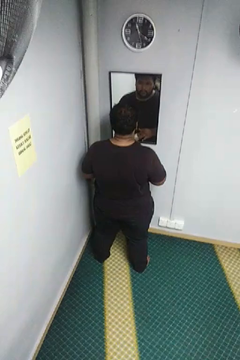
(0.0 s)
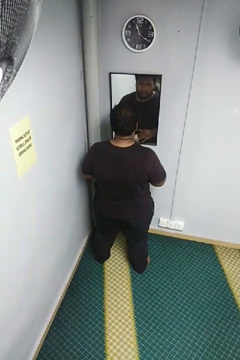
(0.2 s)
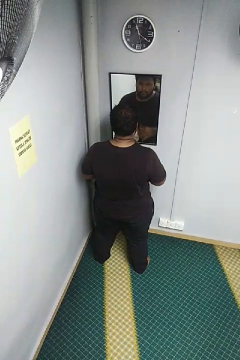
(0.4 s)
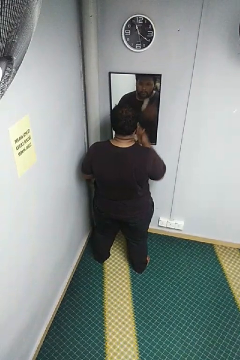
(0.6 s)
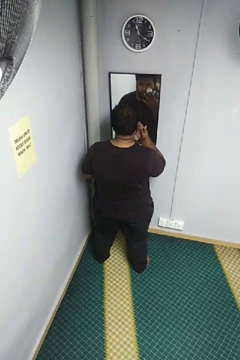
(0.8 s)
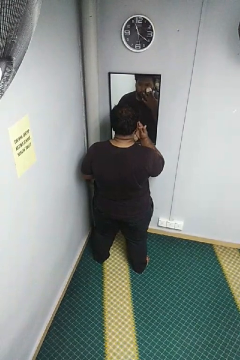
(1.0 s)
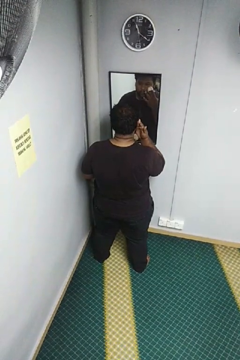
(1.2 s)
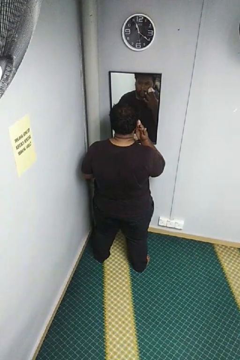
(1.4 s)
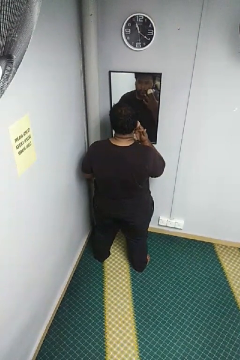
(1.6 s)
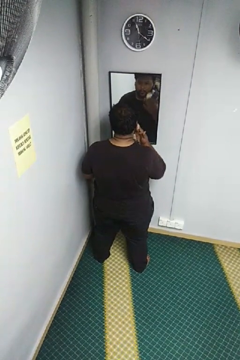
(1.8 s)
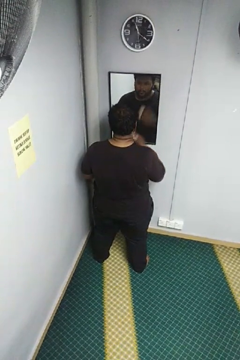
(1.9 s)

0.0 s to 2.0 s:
person applies foundation makeup

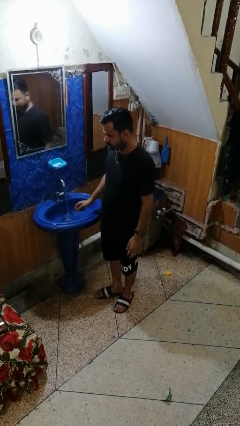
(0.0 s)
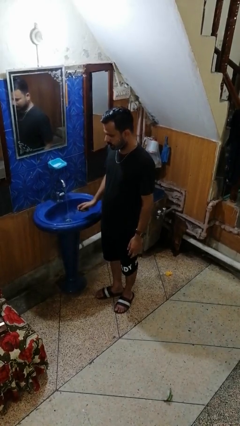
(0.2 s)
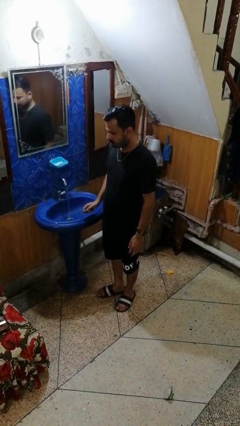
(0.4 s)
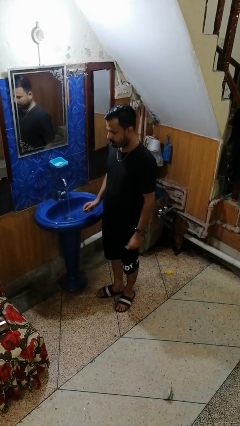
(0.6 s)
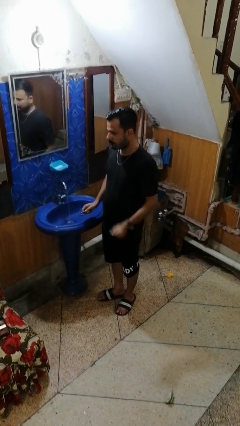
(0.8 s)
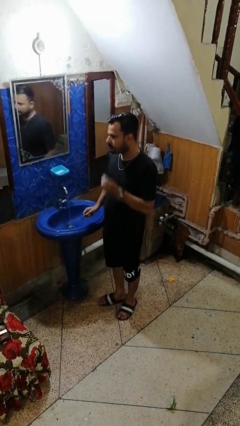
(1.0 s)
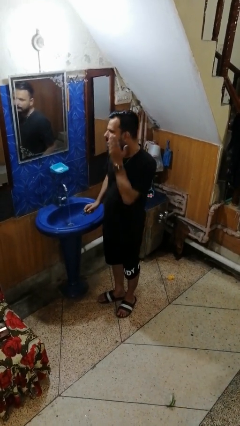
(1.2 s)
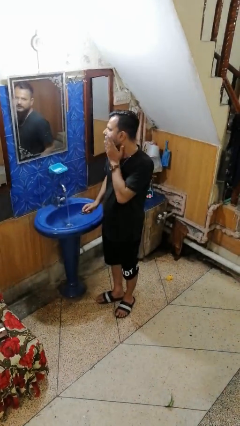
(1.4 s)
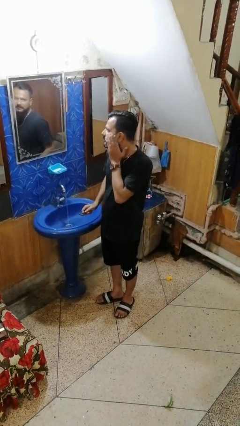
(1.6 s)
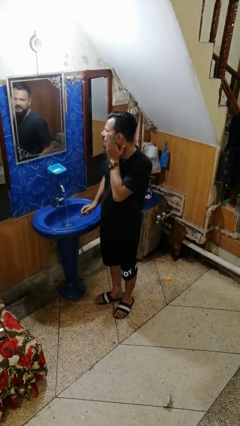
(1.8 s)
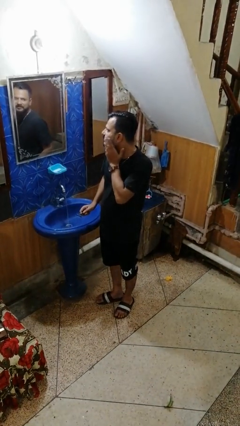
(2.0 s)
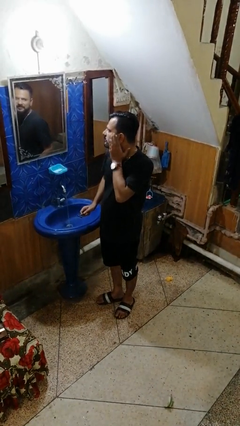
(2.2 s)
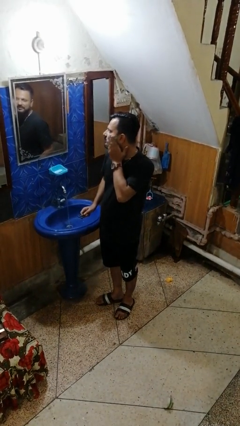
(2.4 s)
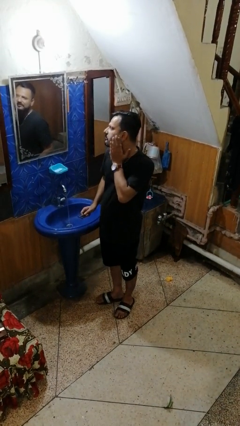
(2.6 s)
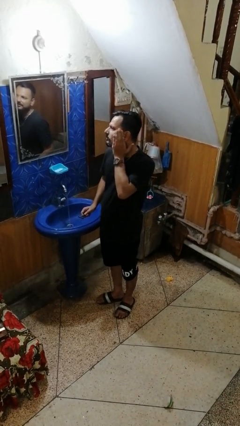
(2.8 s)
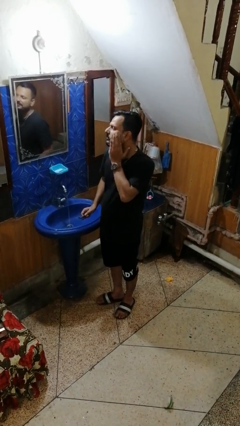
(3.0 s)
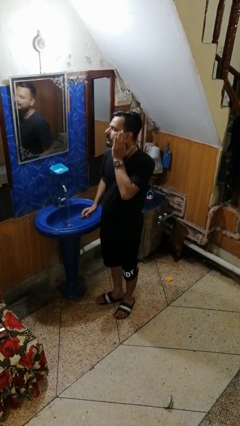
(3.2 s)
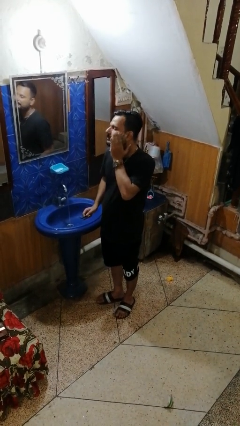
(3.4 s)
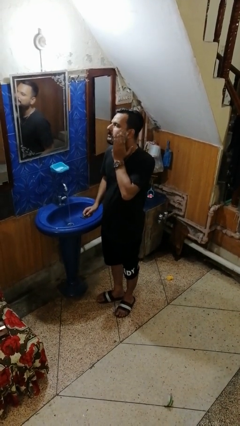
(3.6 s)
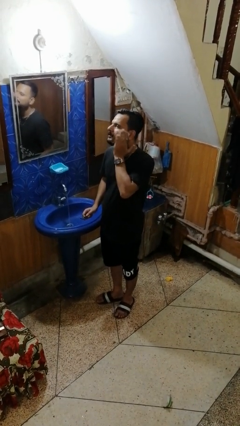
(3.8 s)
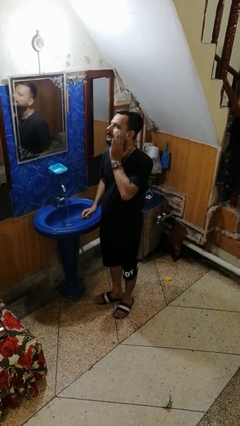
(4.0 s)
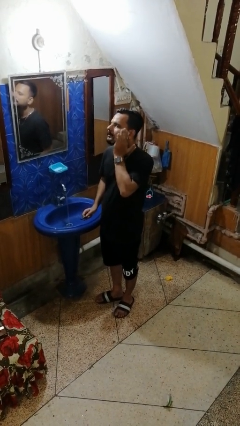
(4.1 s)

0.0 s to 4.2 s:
person applies shaving cream

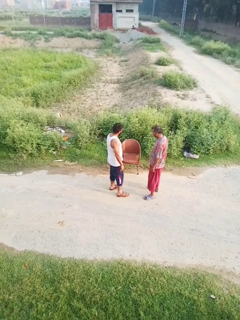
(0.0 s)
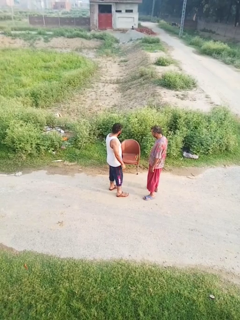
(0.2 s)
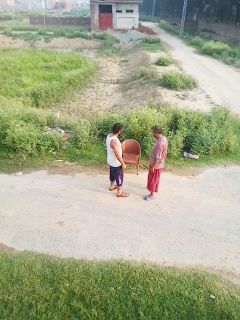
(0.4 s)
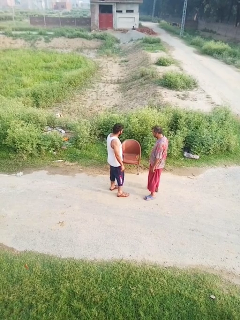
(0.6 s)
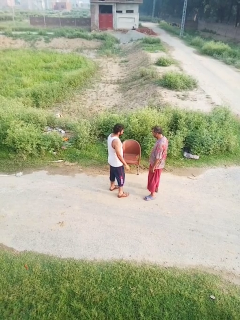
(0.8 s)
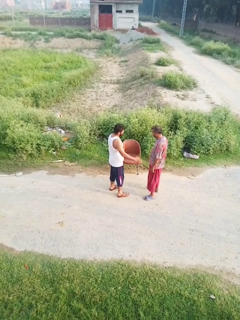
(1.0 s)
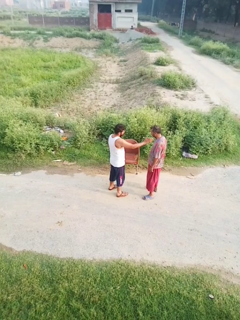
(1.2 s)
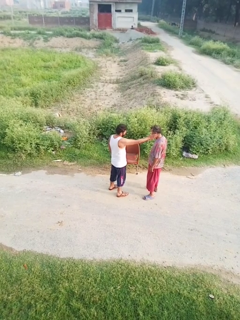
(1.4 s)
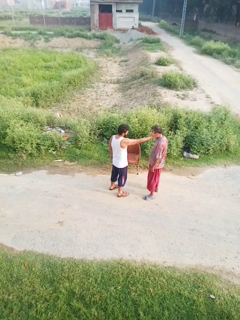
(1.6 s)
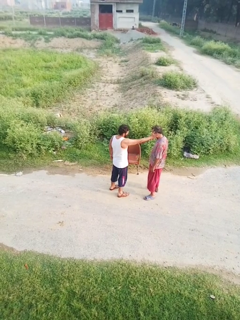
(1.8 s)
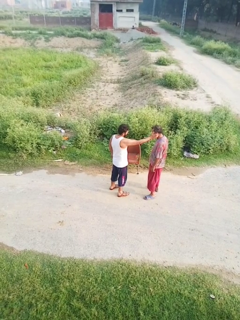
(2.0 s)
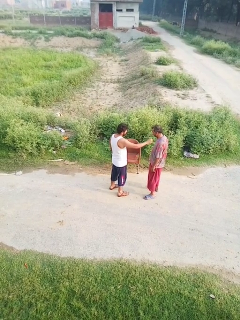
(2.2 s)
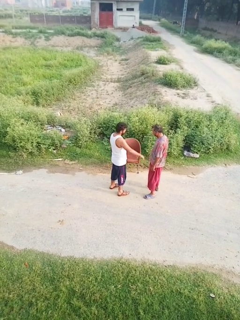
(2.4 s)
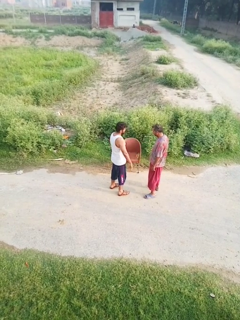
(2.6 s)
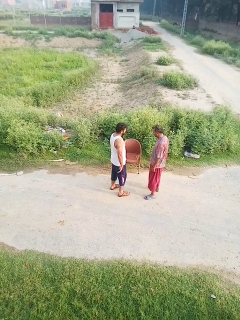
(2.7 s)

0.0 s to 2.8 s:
person touches face of person

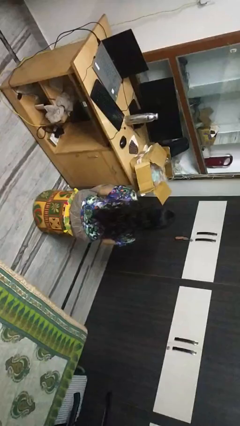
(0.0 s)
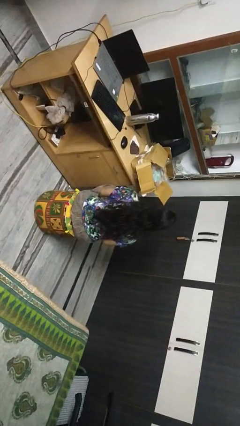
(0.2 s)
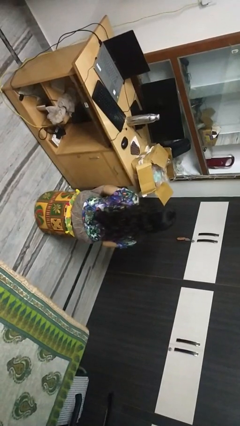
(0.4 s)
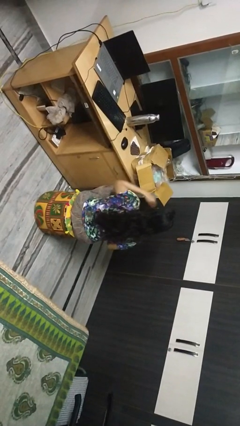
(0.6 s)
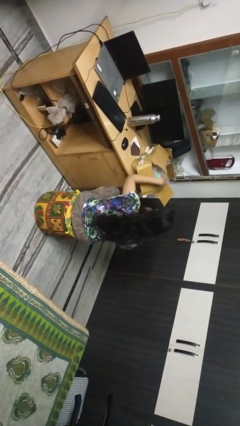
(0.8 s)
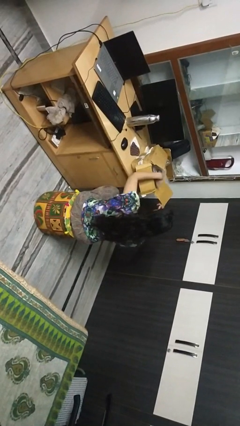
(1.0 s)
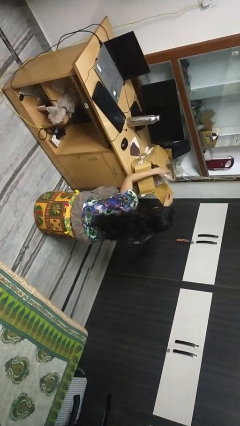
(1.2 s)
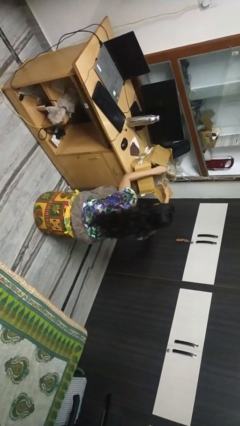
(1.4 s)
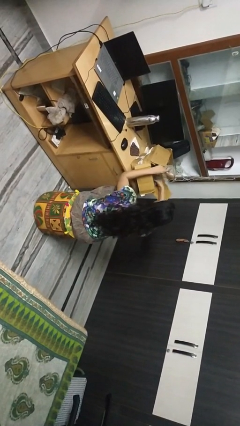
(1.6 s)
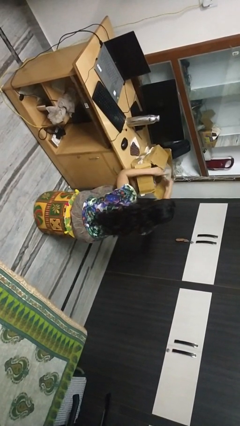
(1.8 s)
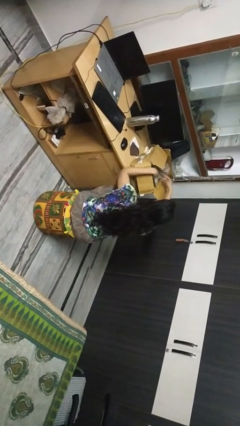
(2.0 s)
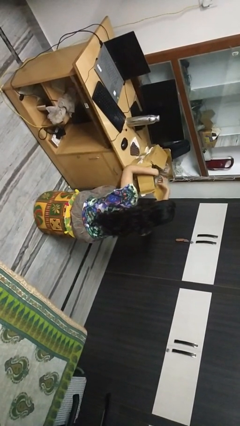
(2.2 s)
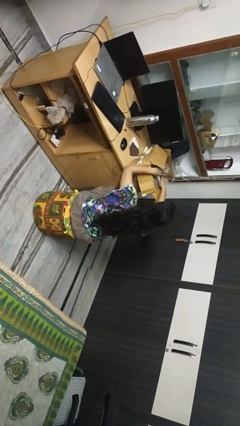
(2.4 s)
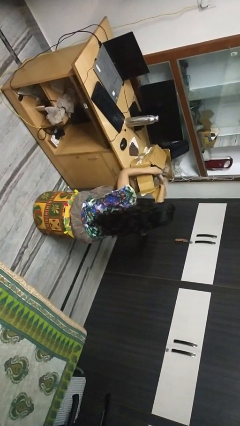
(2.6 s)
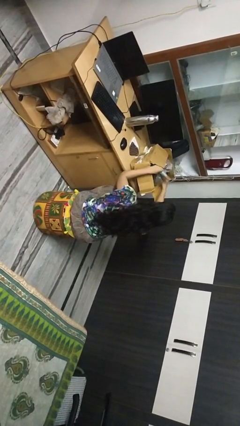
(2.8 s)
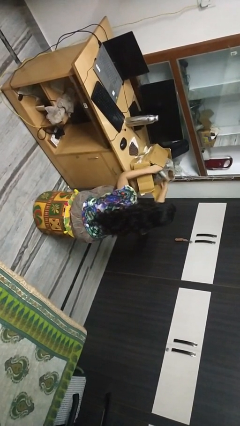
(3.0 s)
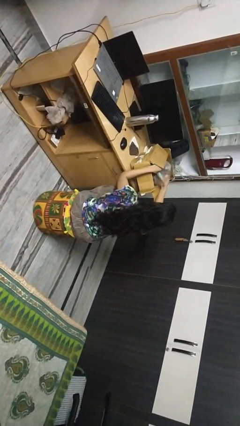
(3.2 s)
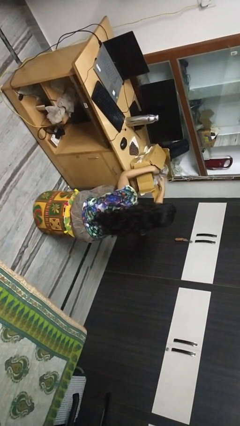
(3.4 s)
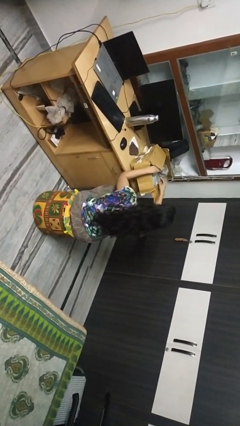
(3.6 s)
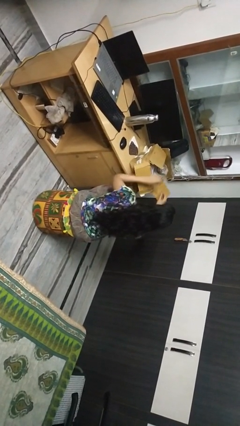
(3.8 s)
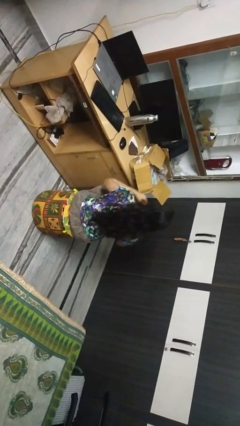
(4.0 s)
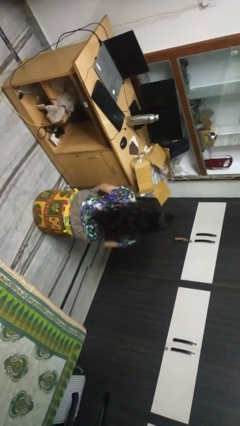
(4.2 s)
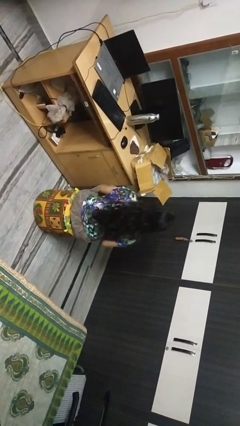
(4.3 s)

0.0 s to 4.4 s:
person searches in box

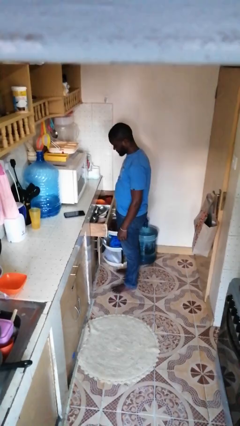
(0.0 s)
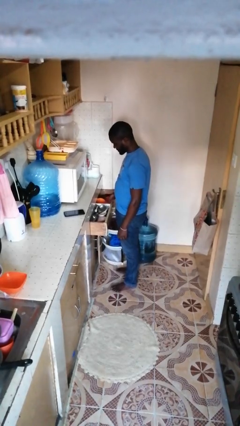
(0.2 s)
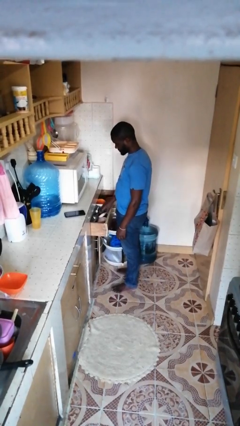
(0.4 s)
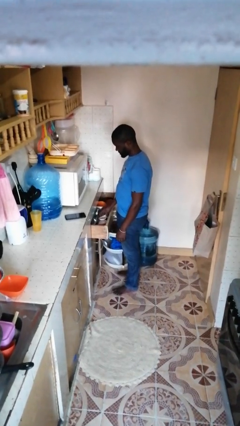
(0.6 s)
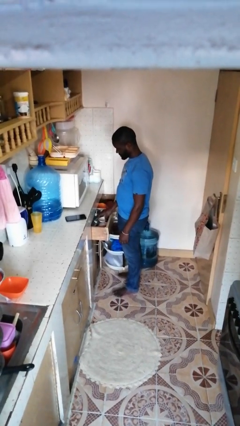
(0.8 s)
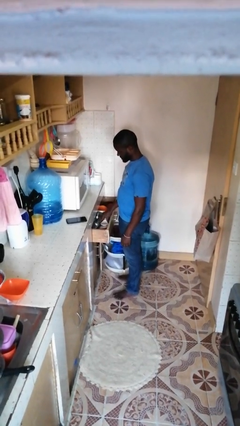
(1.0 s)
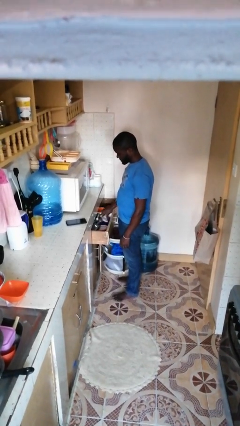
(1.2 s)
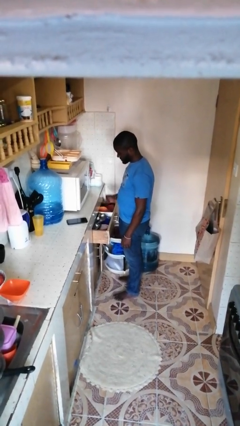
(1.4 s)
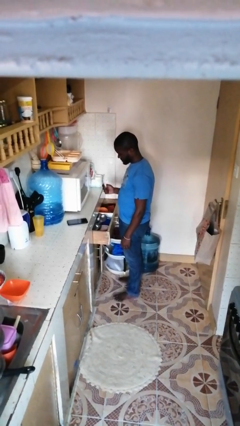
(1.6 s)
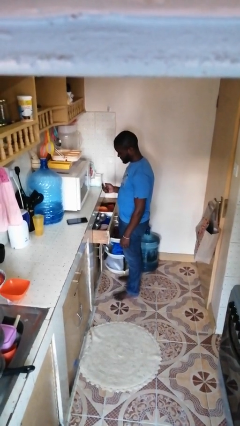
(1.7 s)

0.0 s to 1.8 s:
person takes object from kitchen drawer

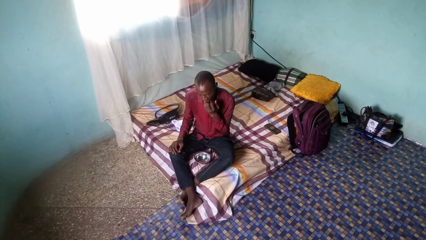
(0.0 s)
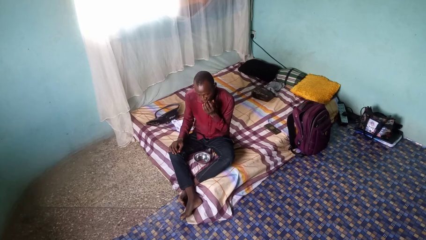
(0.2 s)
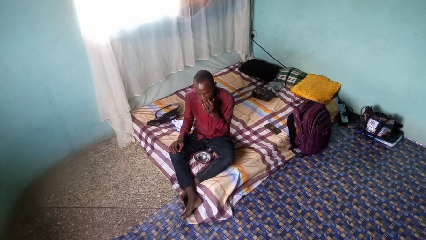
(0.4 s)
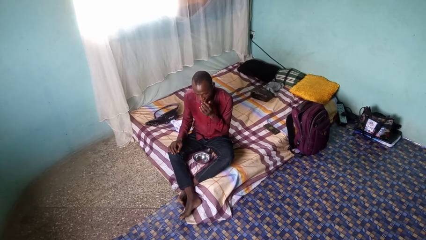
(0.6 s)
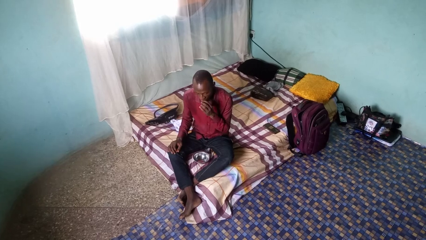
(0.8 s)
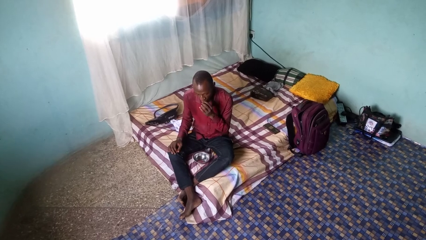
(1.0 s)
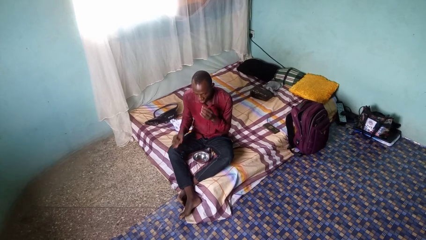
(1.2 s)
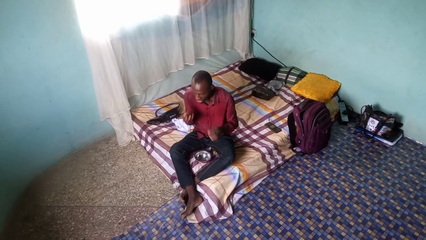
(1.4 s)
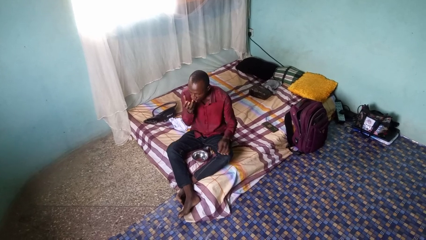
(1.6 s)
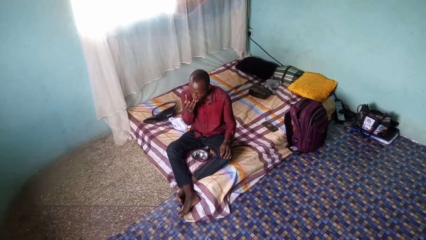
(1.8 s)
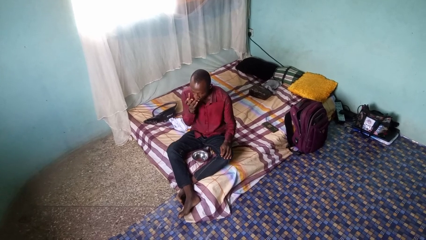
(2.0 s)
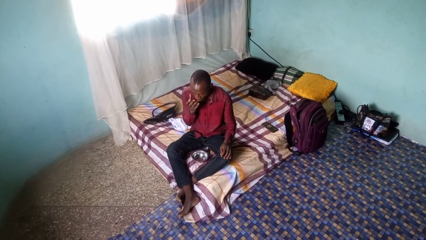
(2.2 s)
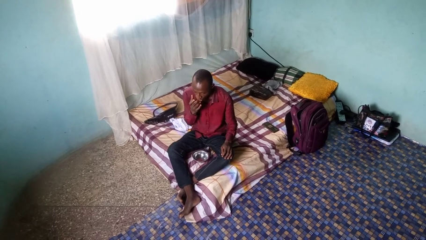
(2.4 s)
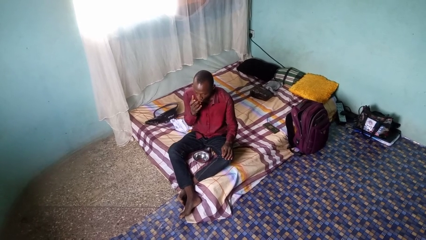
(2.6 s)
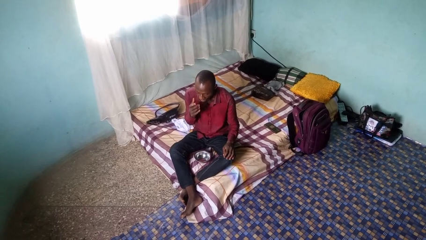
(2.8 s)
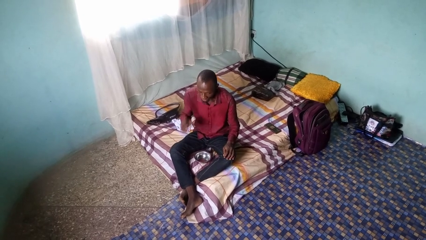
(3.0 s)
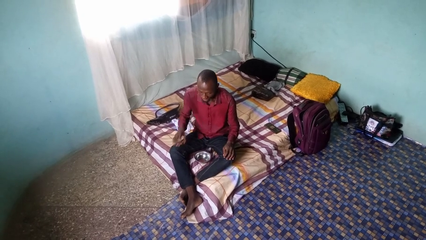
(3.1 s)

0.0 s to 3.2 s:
person licks fingers

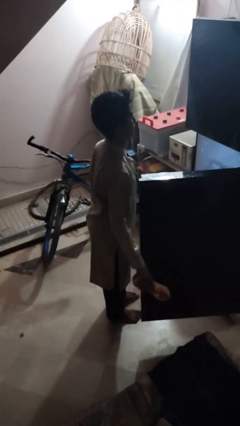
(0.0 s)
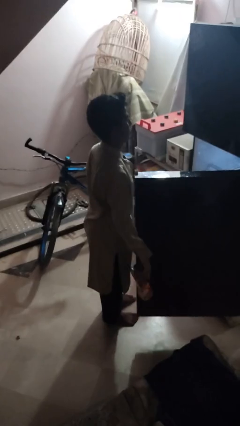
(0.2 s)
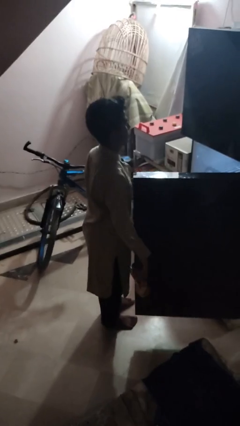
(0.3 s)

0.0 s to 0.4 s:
person takes object from refrigerator
